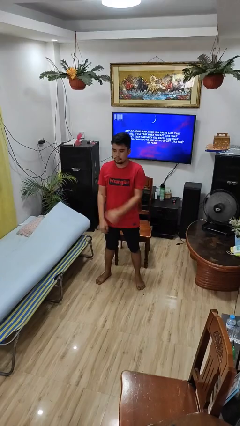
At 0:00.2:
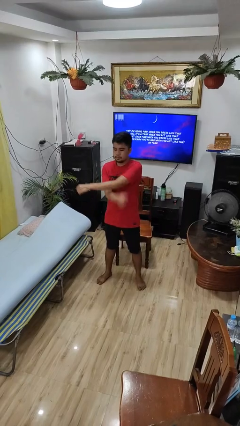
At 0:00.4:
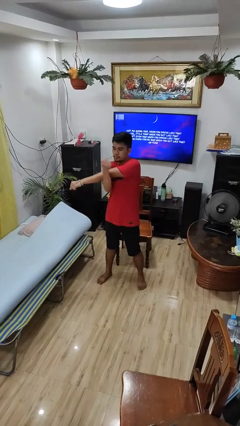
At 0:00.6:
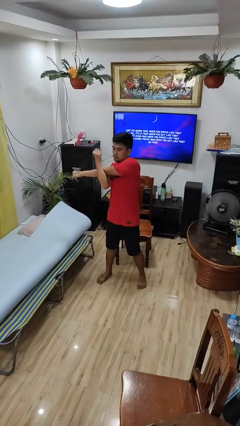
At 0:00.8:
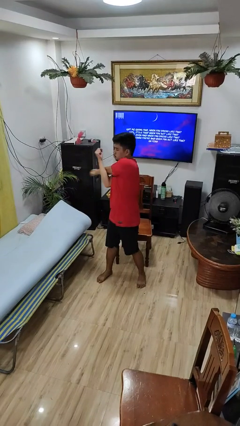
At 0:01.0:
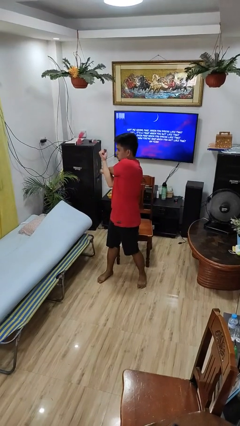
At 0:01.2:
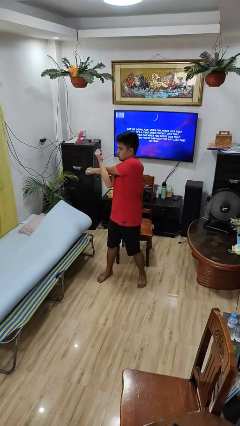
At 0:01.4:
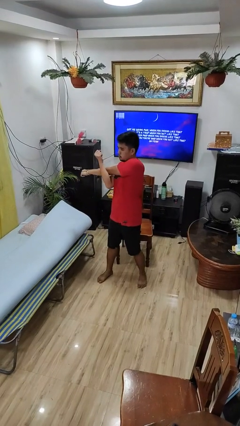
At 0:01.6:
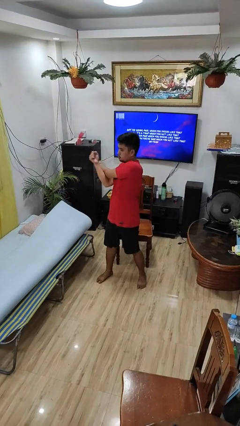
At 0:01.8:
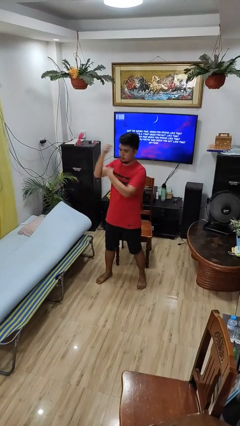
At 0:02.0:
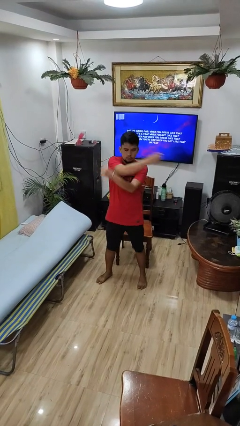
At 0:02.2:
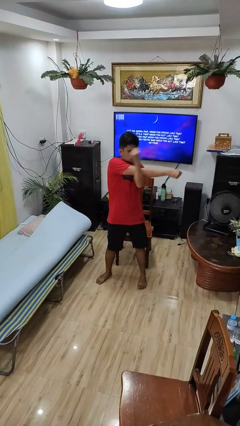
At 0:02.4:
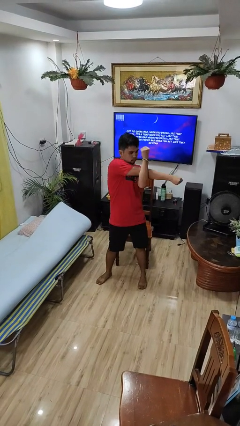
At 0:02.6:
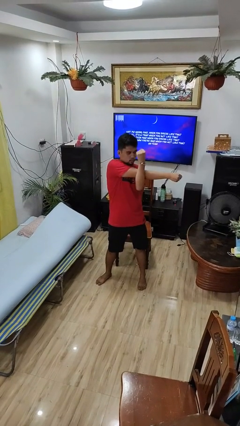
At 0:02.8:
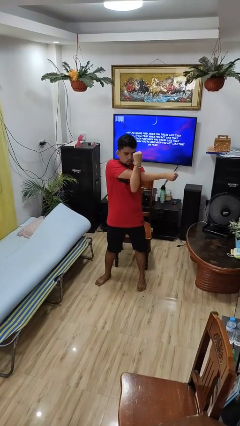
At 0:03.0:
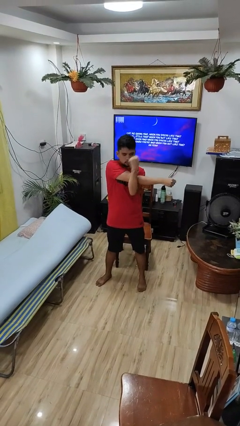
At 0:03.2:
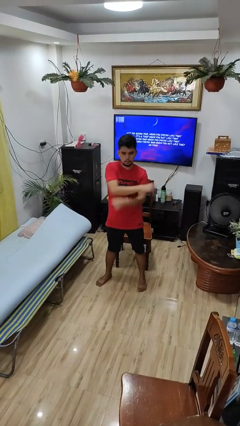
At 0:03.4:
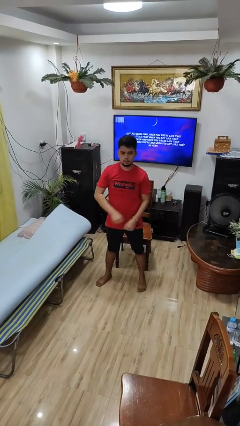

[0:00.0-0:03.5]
person stretches arms to side

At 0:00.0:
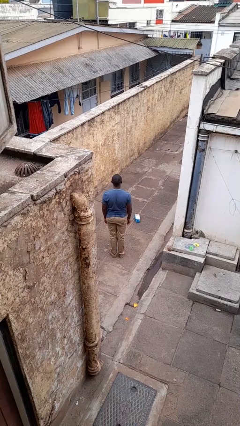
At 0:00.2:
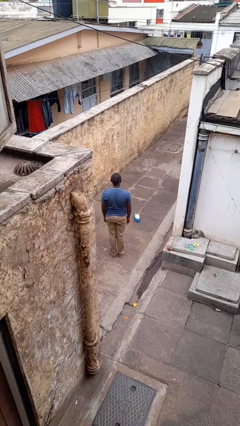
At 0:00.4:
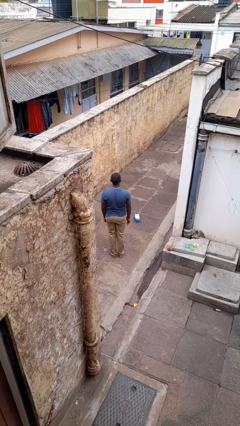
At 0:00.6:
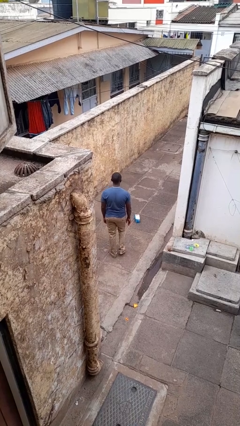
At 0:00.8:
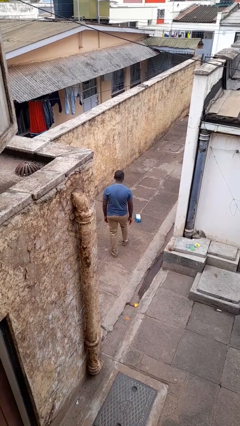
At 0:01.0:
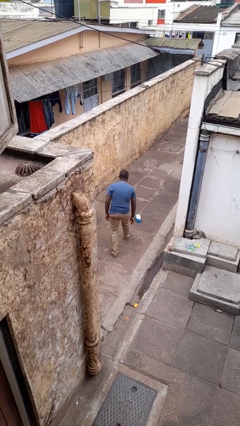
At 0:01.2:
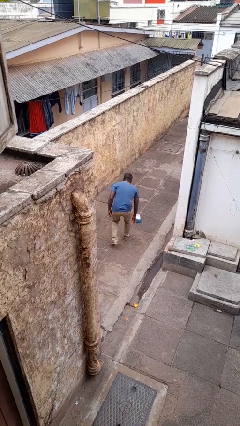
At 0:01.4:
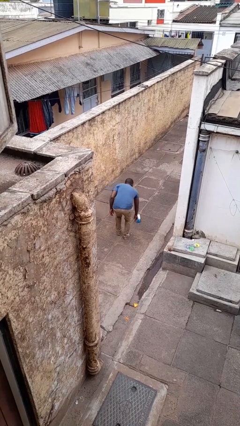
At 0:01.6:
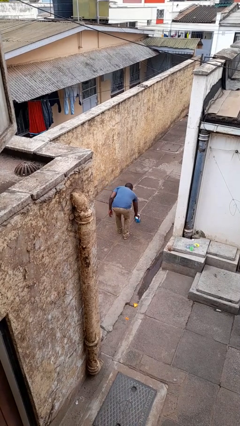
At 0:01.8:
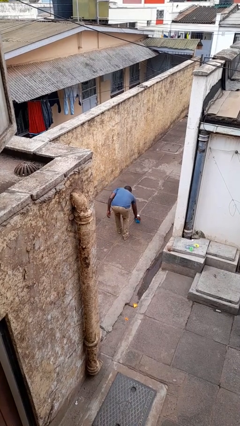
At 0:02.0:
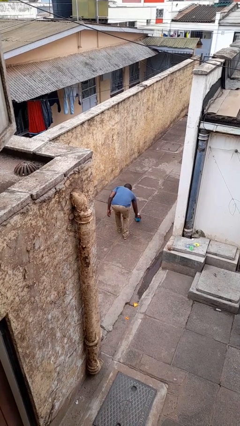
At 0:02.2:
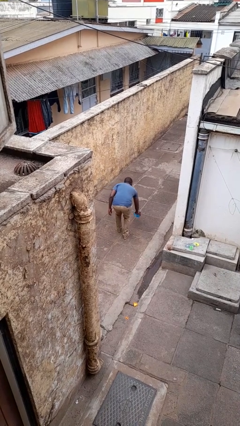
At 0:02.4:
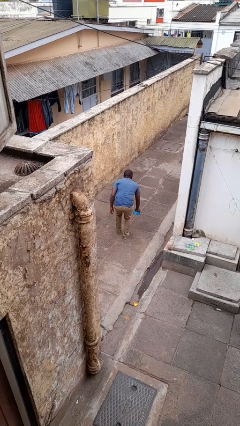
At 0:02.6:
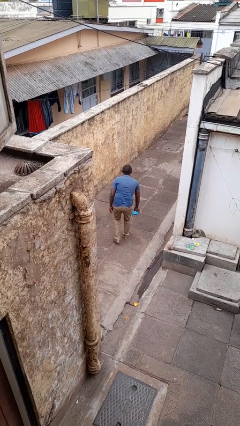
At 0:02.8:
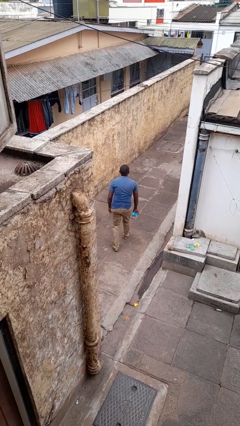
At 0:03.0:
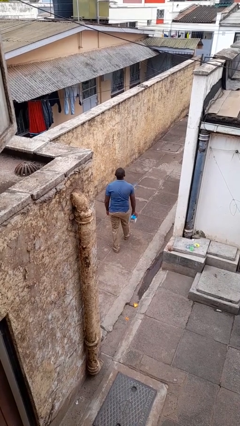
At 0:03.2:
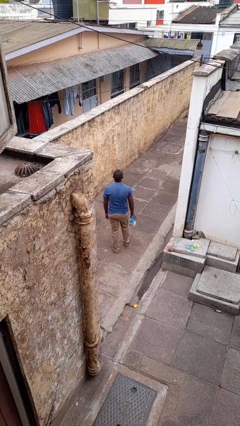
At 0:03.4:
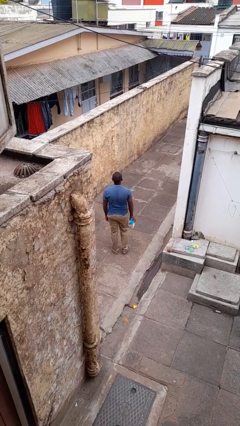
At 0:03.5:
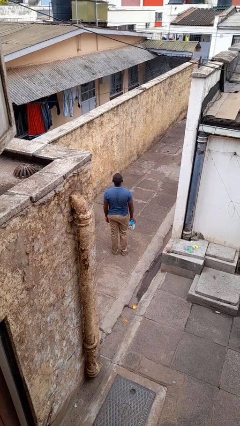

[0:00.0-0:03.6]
person picks up object from floor

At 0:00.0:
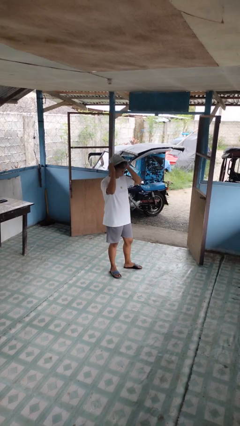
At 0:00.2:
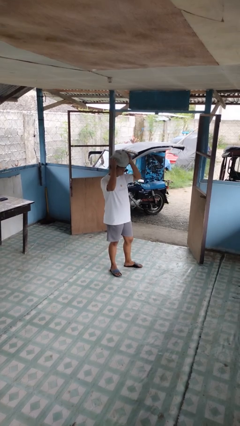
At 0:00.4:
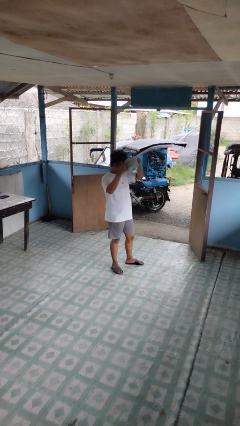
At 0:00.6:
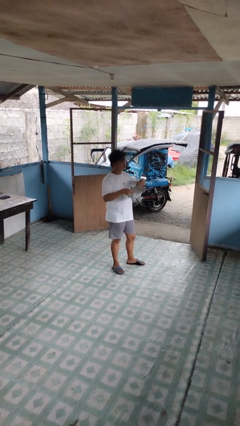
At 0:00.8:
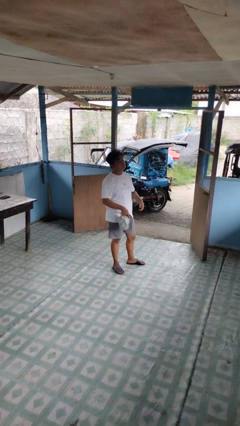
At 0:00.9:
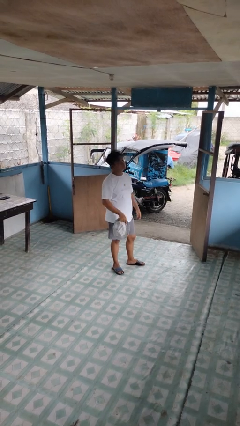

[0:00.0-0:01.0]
person takes off hat

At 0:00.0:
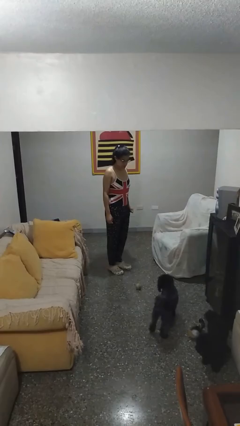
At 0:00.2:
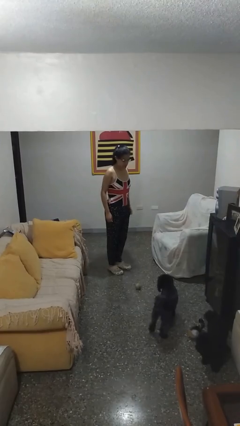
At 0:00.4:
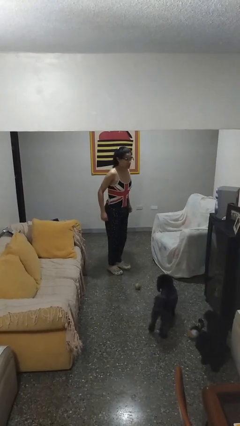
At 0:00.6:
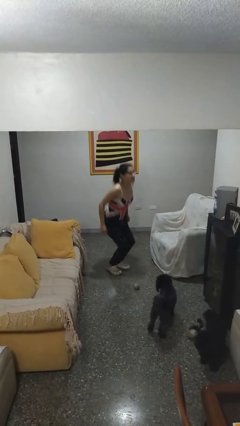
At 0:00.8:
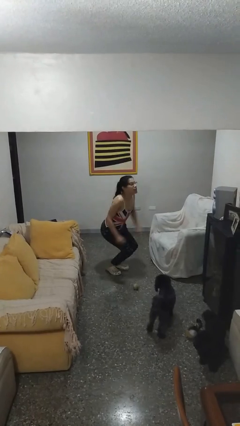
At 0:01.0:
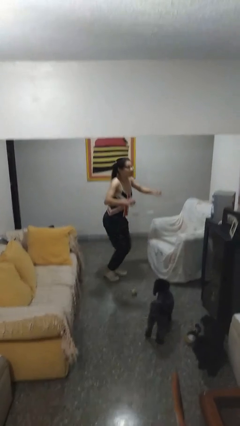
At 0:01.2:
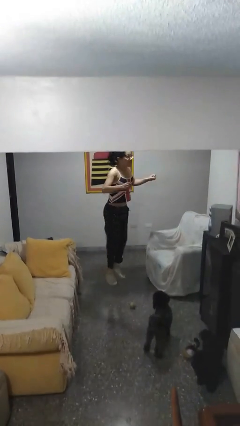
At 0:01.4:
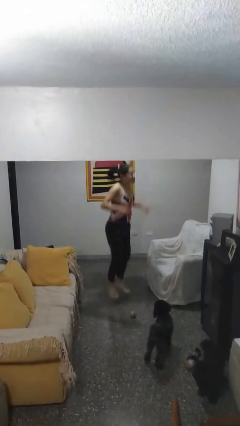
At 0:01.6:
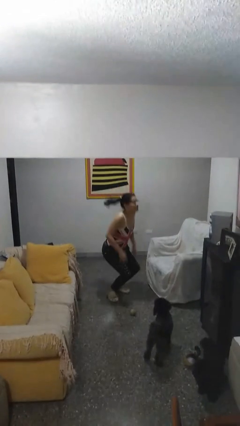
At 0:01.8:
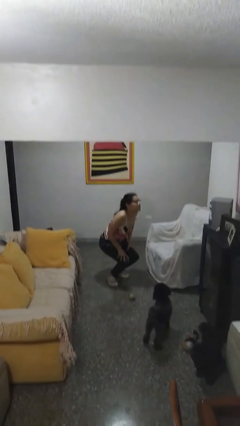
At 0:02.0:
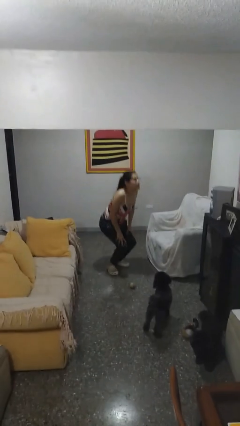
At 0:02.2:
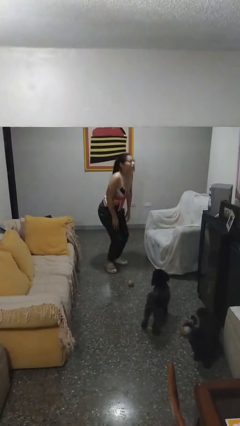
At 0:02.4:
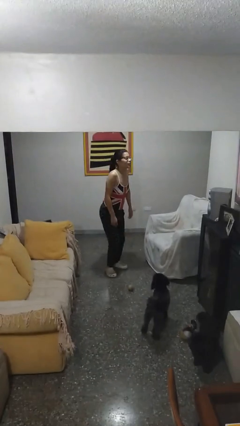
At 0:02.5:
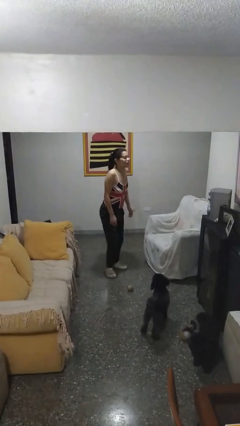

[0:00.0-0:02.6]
person jumps

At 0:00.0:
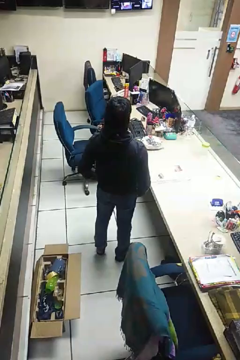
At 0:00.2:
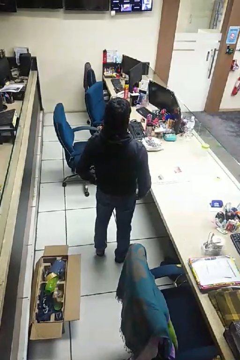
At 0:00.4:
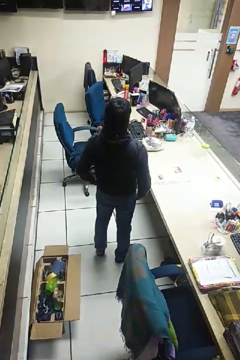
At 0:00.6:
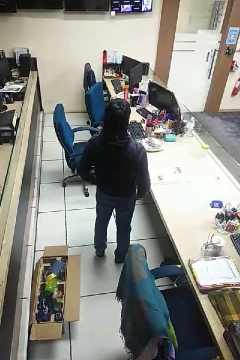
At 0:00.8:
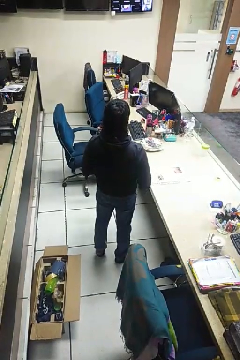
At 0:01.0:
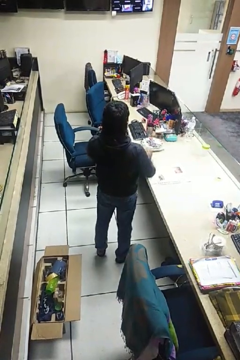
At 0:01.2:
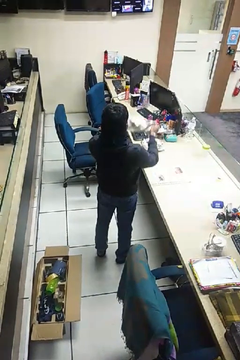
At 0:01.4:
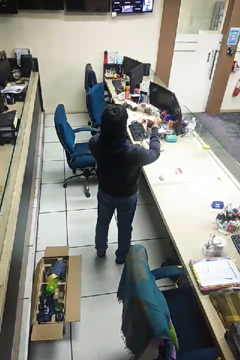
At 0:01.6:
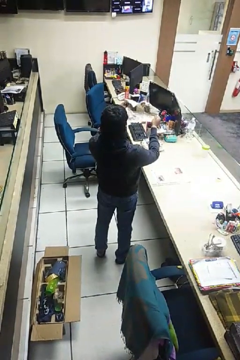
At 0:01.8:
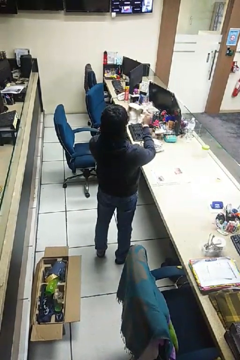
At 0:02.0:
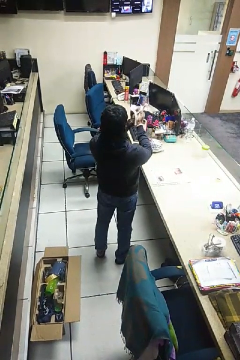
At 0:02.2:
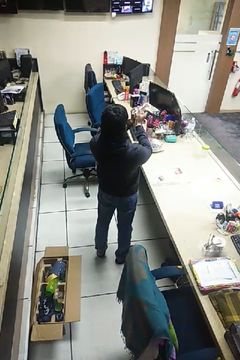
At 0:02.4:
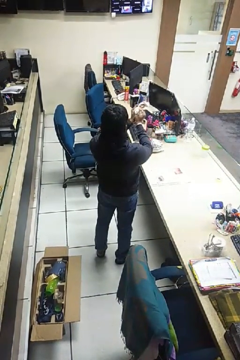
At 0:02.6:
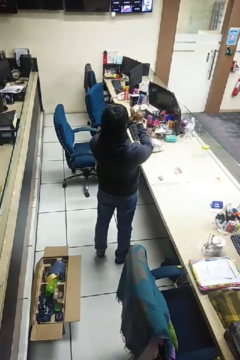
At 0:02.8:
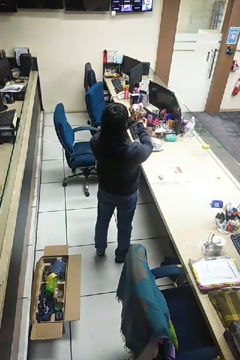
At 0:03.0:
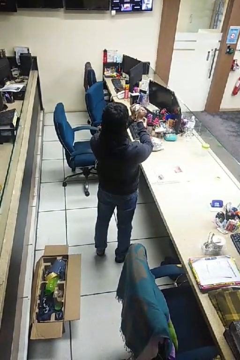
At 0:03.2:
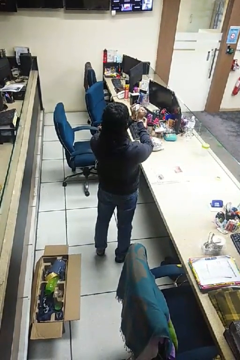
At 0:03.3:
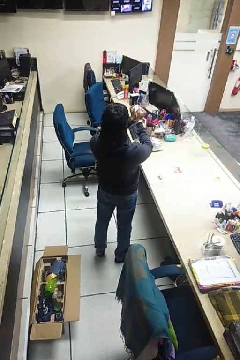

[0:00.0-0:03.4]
person crumples paper

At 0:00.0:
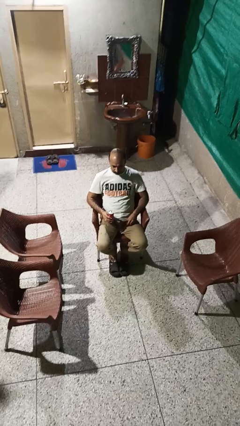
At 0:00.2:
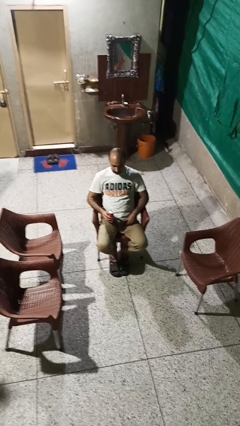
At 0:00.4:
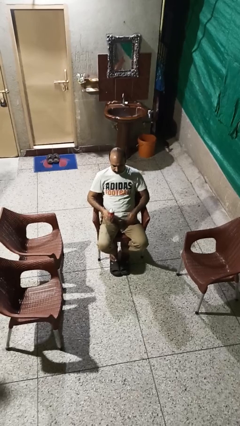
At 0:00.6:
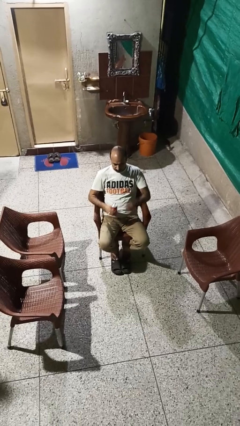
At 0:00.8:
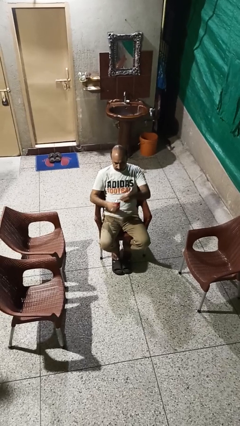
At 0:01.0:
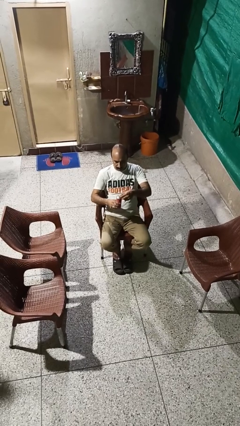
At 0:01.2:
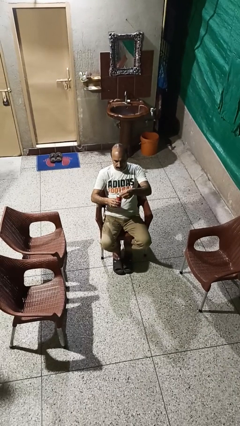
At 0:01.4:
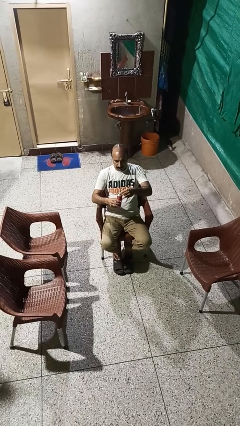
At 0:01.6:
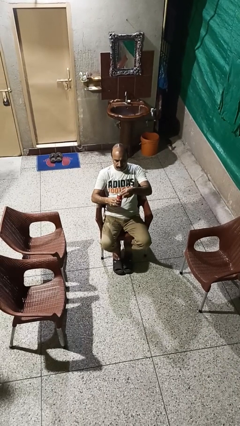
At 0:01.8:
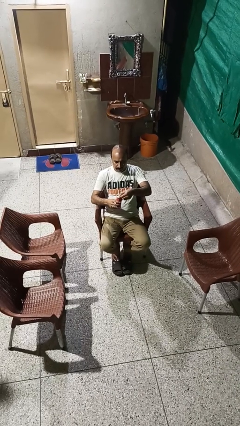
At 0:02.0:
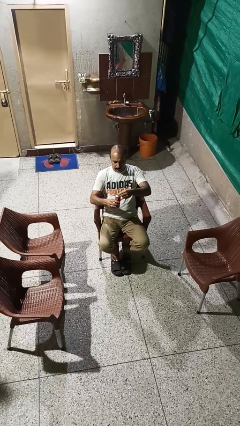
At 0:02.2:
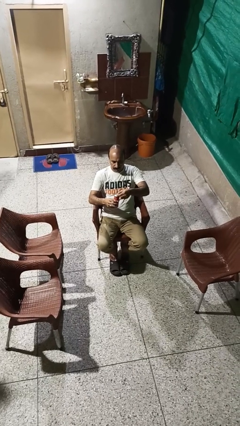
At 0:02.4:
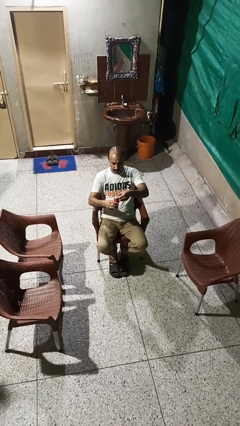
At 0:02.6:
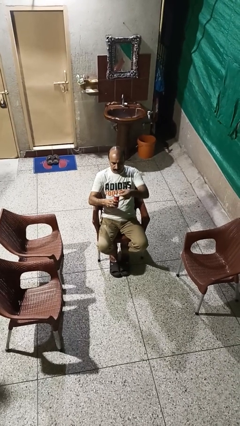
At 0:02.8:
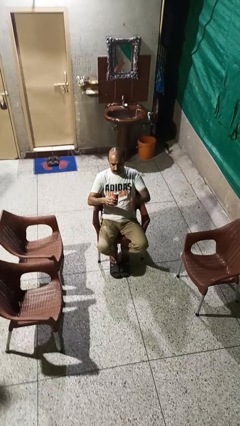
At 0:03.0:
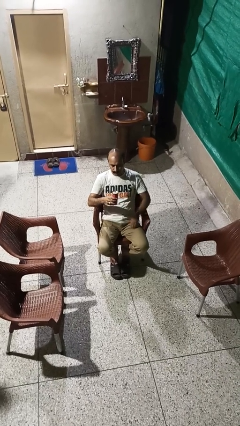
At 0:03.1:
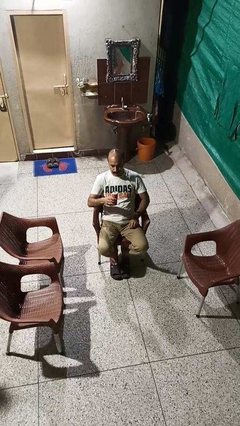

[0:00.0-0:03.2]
person opens beverage can

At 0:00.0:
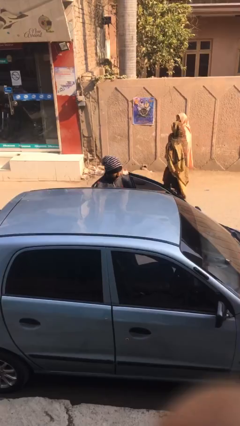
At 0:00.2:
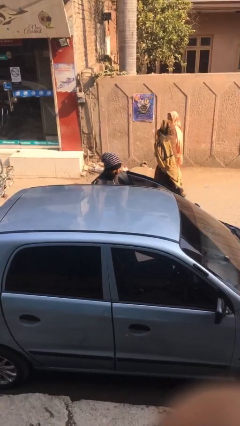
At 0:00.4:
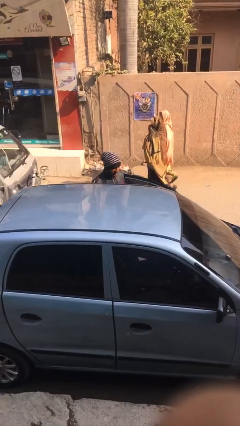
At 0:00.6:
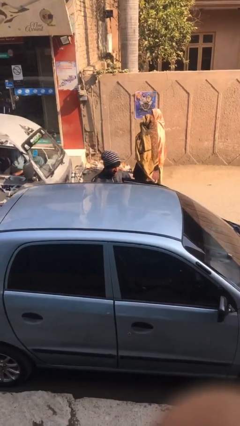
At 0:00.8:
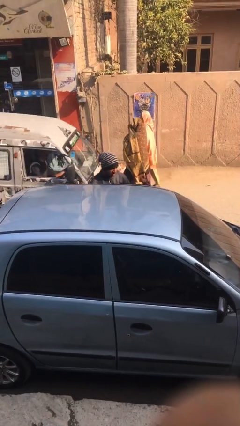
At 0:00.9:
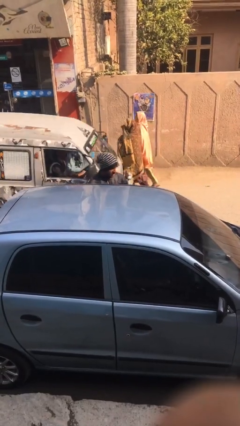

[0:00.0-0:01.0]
person closes car door
